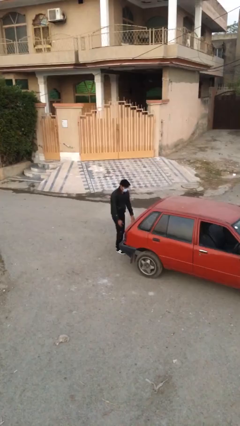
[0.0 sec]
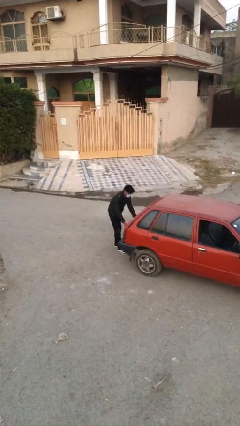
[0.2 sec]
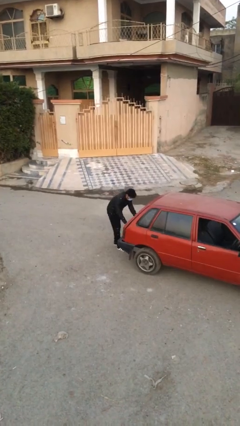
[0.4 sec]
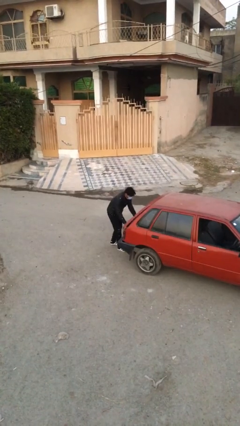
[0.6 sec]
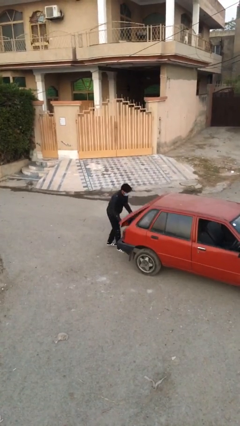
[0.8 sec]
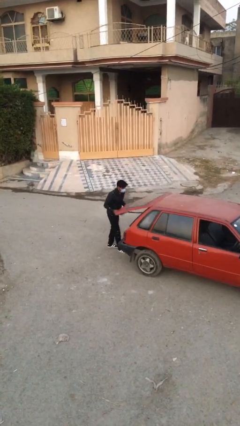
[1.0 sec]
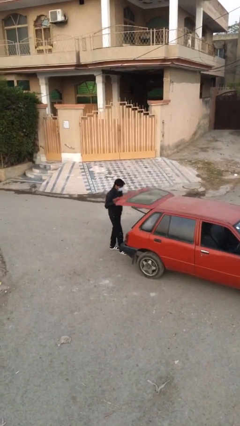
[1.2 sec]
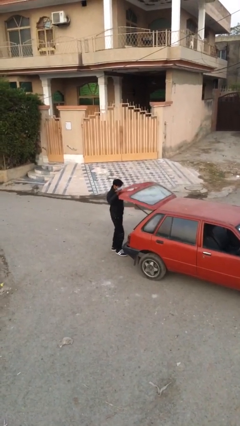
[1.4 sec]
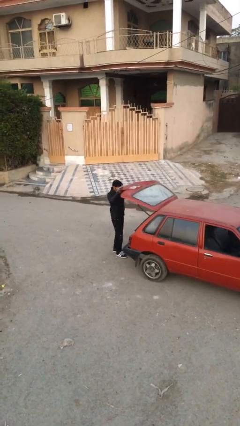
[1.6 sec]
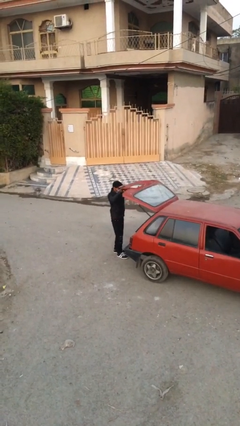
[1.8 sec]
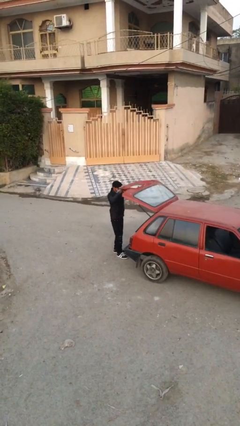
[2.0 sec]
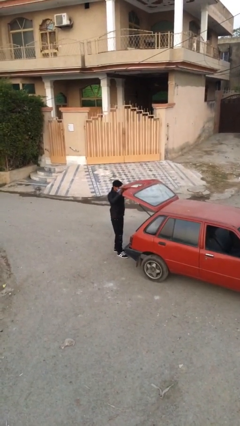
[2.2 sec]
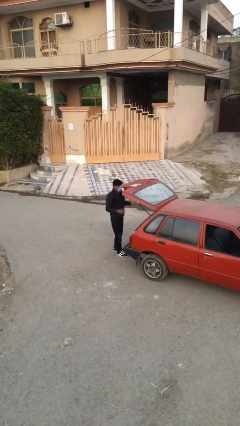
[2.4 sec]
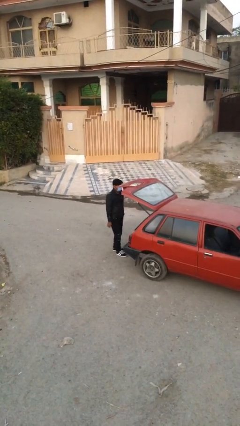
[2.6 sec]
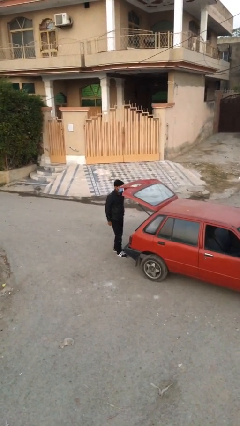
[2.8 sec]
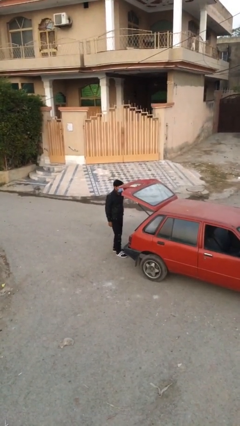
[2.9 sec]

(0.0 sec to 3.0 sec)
person opens car trunk

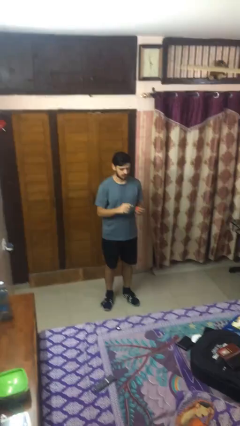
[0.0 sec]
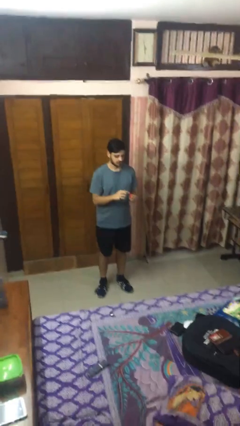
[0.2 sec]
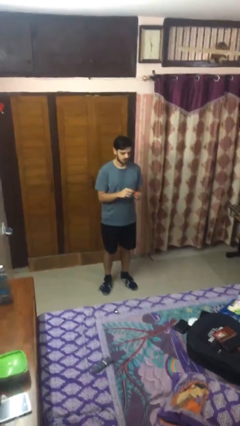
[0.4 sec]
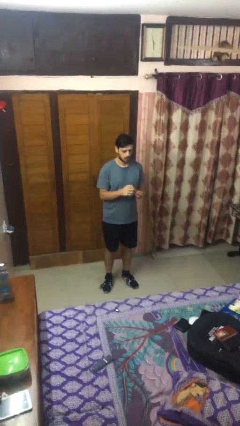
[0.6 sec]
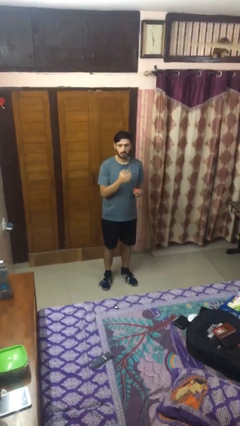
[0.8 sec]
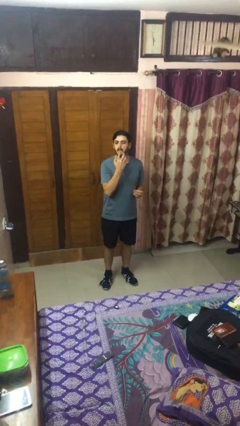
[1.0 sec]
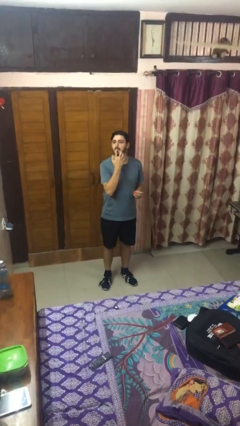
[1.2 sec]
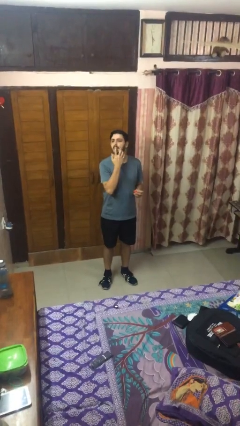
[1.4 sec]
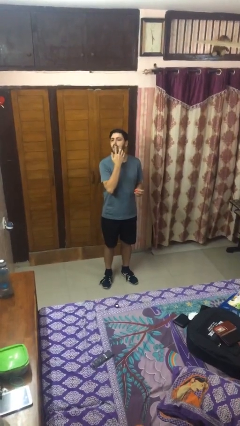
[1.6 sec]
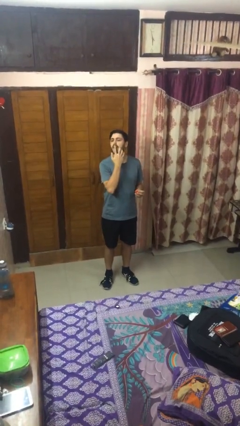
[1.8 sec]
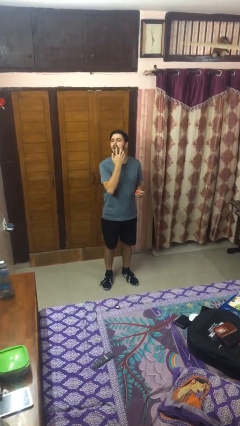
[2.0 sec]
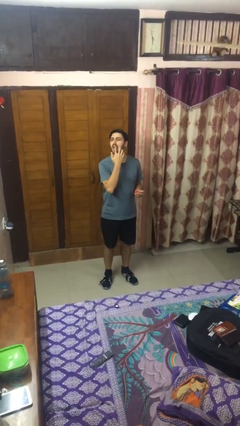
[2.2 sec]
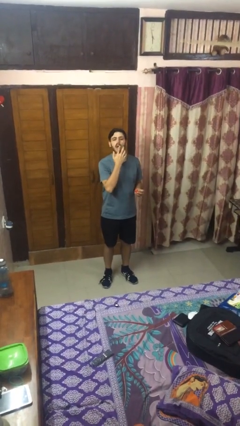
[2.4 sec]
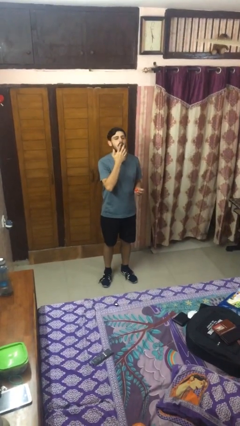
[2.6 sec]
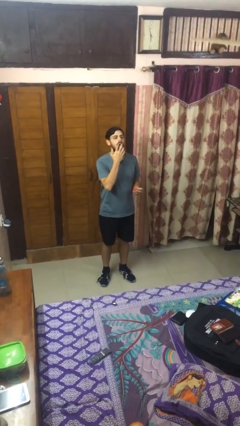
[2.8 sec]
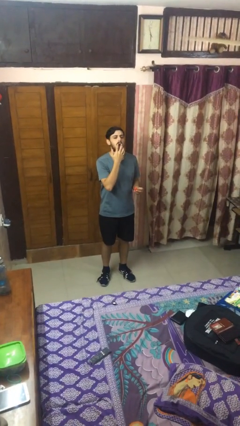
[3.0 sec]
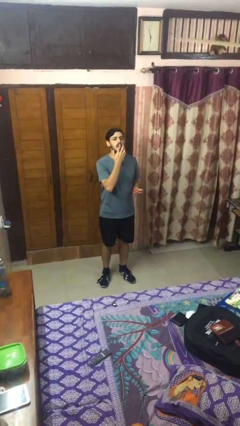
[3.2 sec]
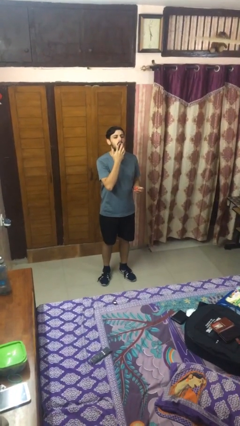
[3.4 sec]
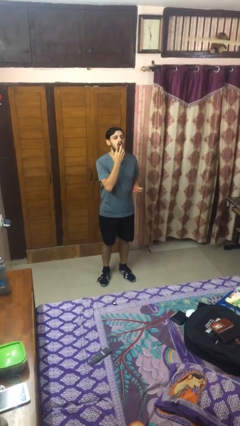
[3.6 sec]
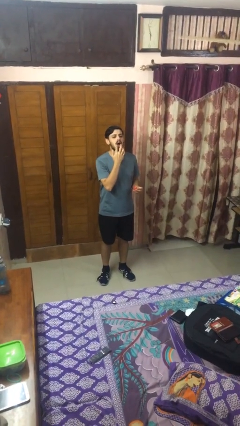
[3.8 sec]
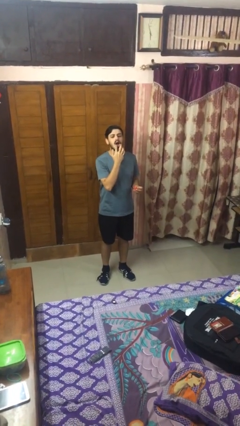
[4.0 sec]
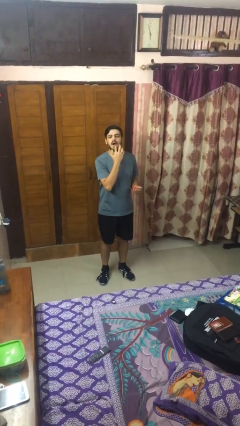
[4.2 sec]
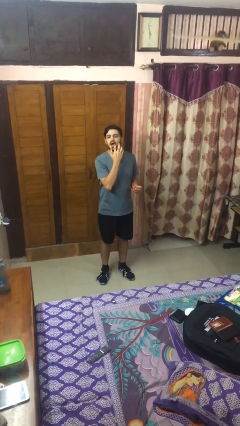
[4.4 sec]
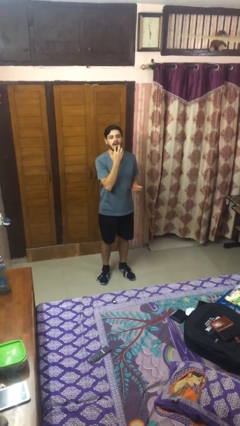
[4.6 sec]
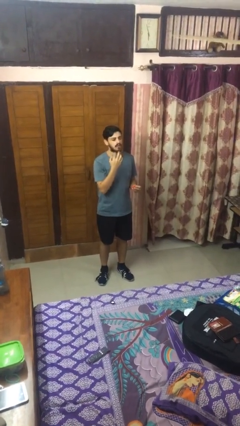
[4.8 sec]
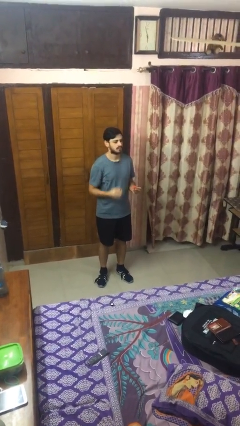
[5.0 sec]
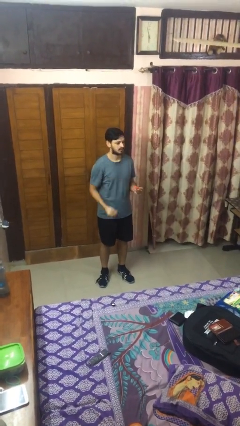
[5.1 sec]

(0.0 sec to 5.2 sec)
person applies lip makeup

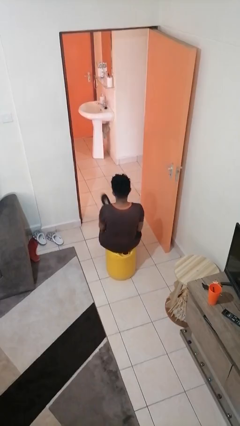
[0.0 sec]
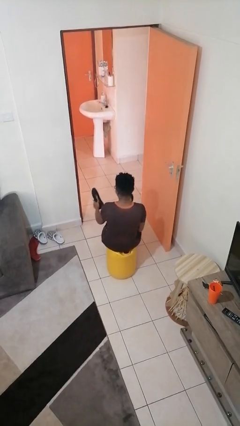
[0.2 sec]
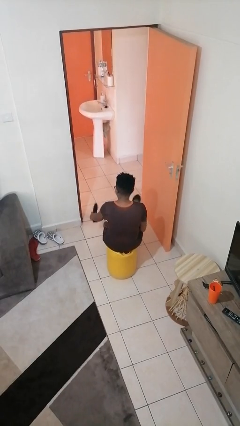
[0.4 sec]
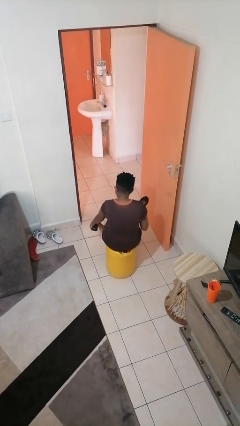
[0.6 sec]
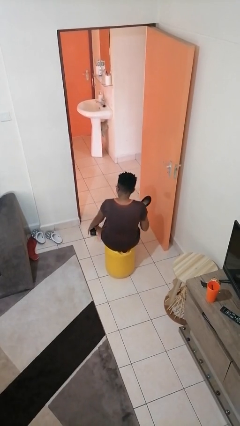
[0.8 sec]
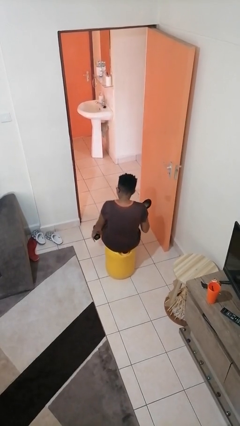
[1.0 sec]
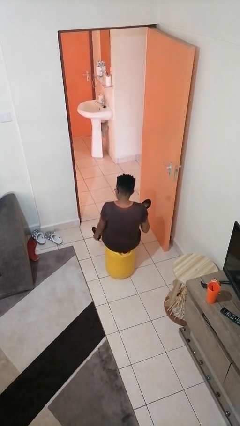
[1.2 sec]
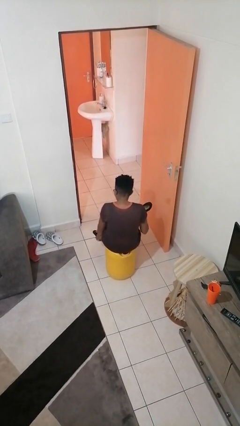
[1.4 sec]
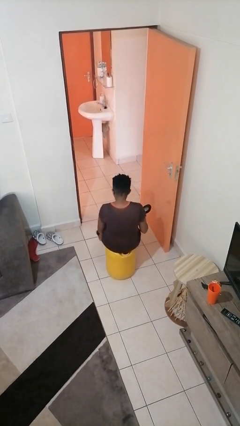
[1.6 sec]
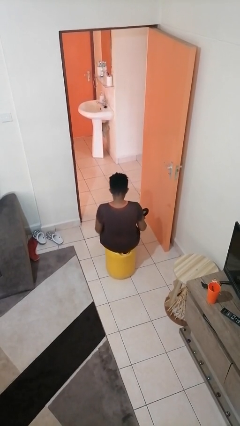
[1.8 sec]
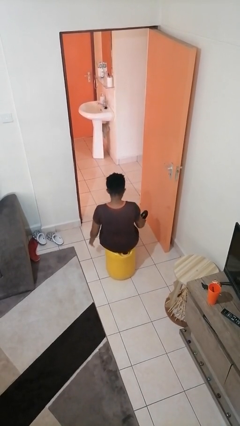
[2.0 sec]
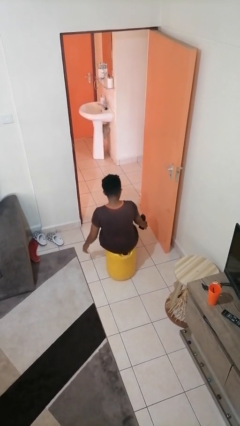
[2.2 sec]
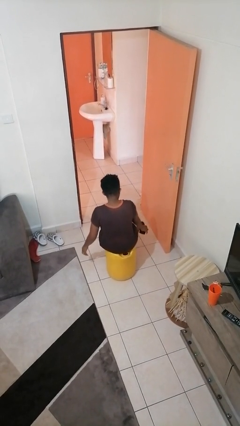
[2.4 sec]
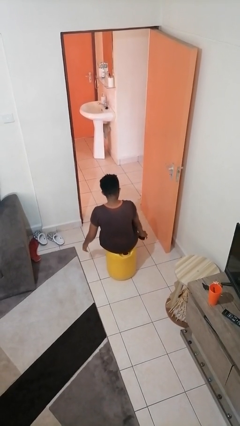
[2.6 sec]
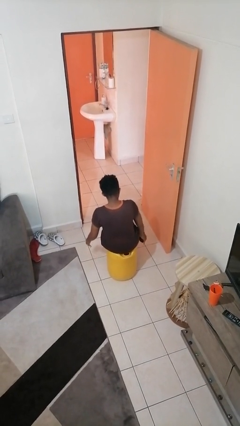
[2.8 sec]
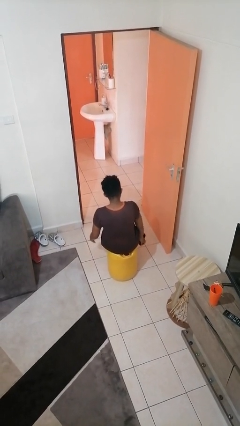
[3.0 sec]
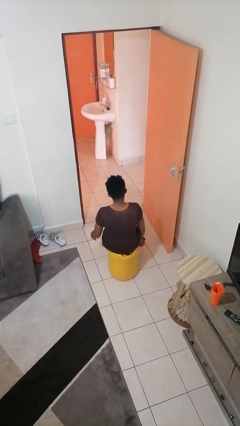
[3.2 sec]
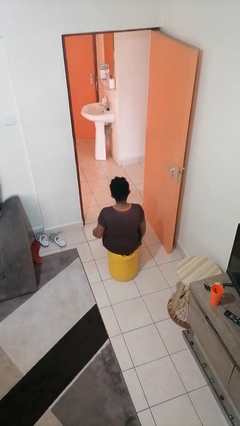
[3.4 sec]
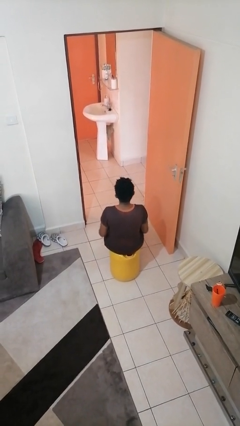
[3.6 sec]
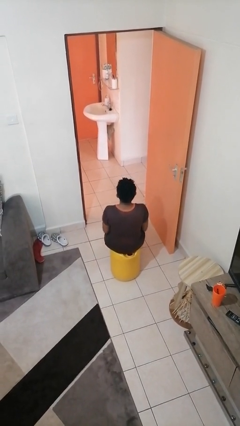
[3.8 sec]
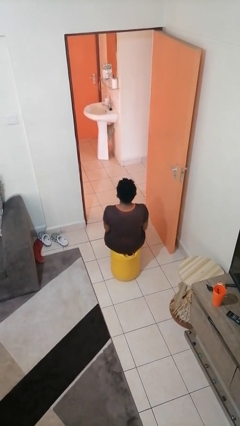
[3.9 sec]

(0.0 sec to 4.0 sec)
person puts on shoes

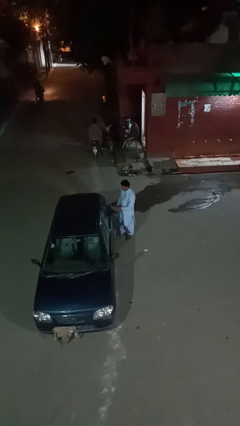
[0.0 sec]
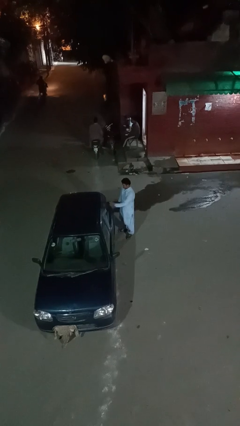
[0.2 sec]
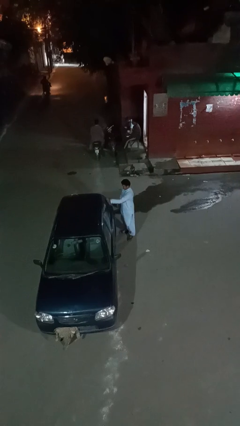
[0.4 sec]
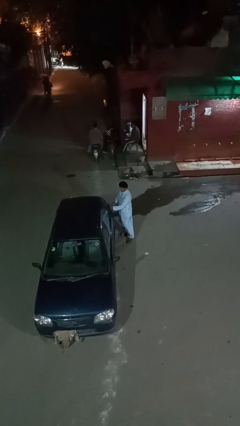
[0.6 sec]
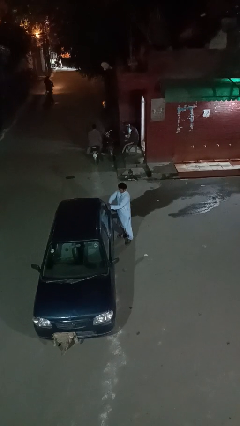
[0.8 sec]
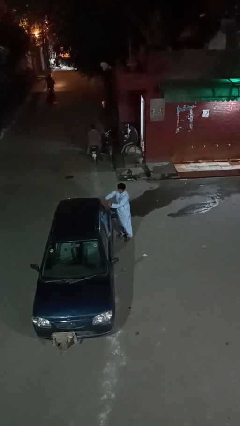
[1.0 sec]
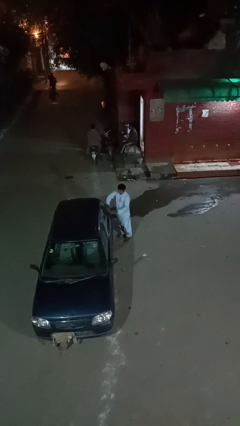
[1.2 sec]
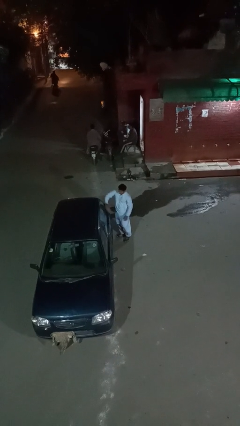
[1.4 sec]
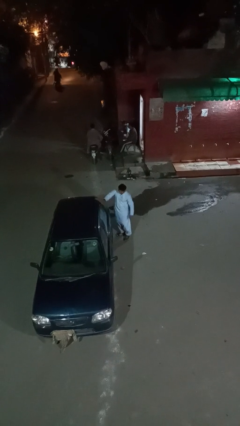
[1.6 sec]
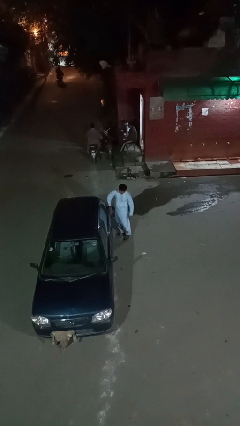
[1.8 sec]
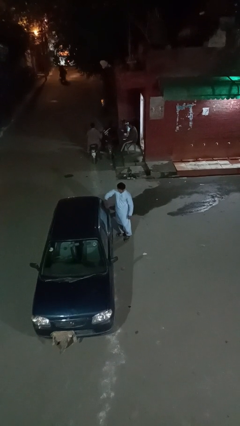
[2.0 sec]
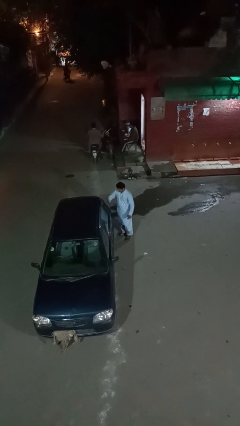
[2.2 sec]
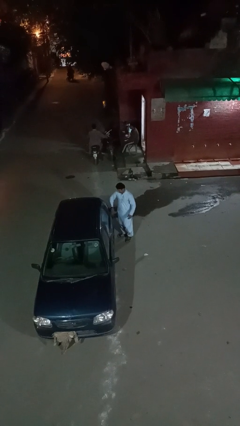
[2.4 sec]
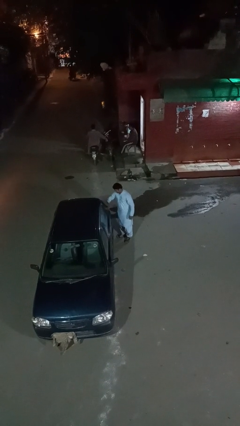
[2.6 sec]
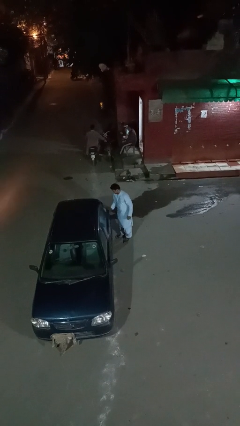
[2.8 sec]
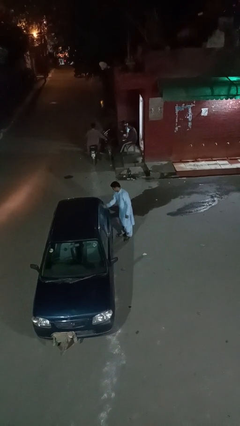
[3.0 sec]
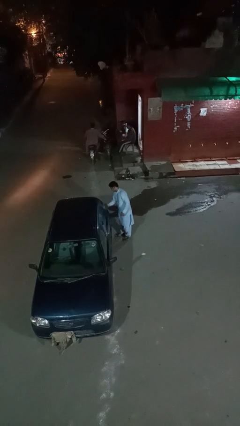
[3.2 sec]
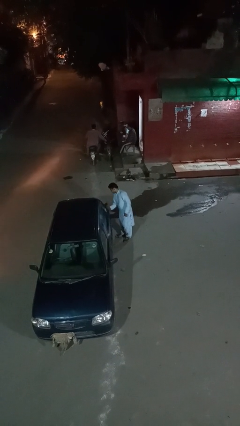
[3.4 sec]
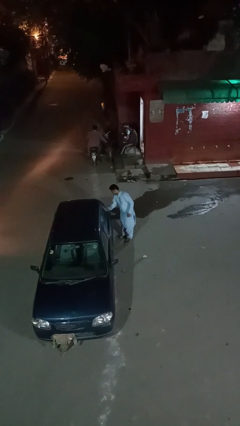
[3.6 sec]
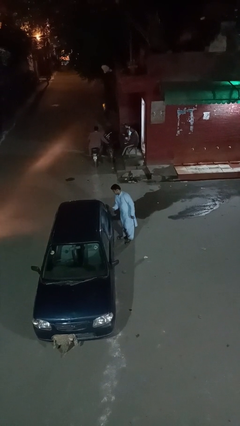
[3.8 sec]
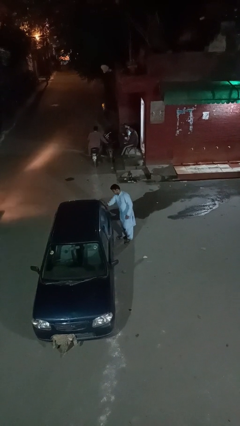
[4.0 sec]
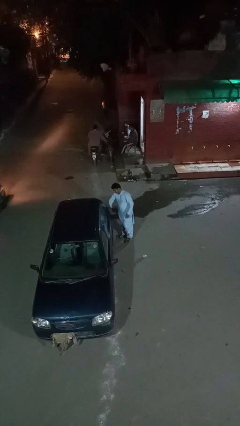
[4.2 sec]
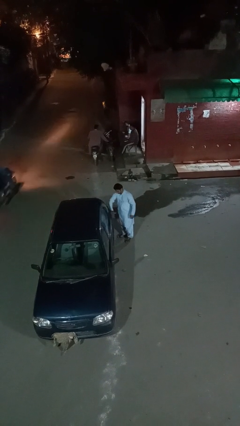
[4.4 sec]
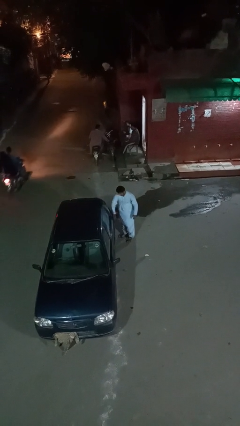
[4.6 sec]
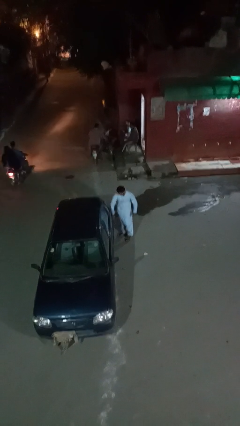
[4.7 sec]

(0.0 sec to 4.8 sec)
person polishes car with rag

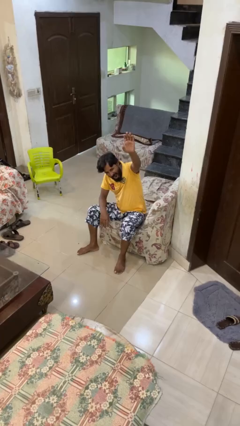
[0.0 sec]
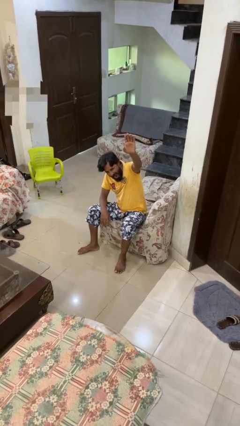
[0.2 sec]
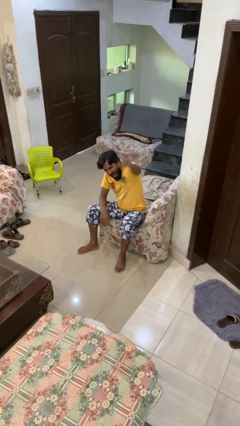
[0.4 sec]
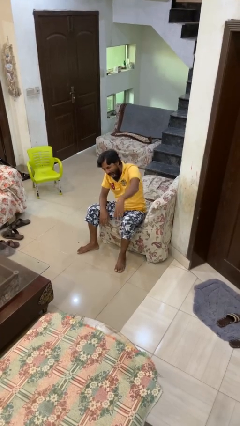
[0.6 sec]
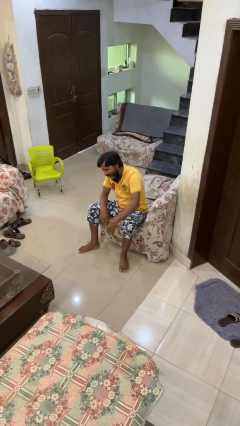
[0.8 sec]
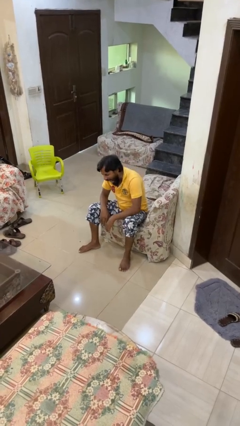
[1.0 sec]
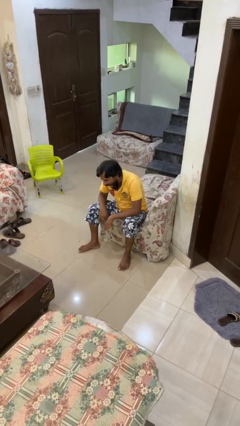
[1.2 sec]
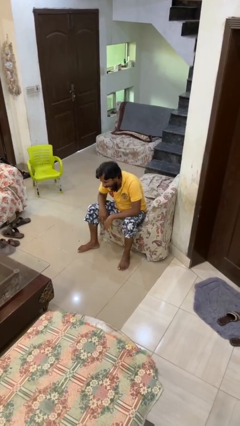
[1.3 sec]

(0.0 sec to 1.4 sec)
person gestures lower hand
